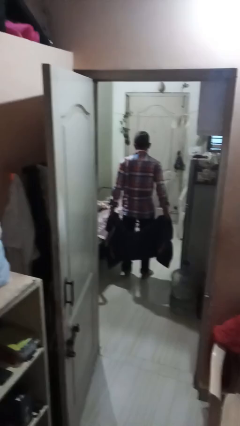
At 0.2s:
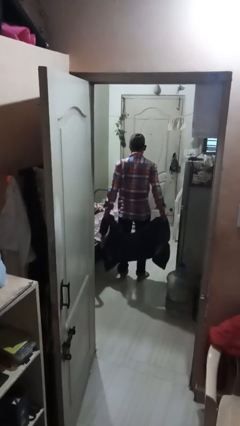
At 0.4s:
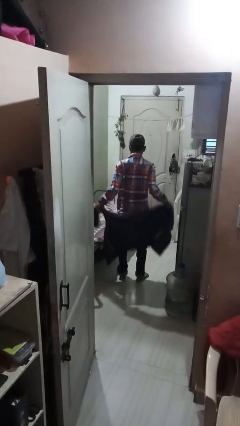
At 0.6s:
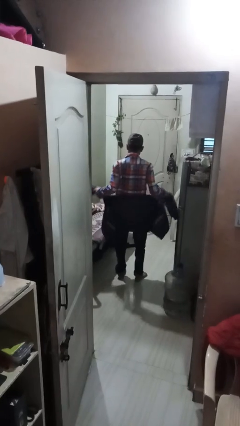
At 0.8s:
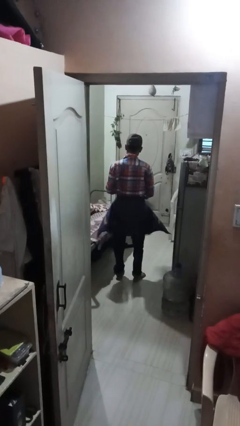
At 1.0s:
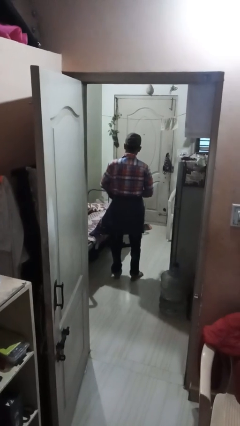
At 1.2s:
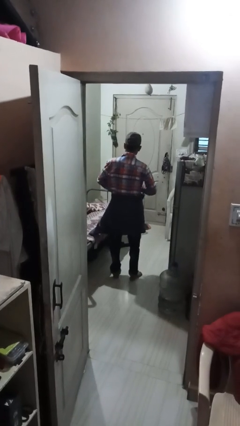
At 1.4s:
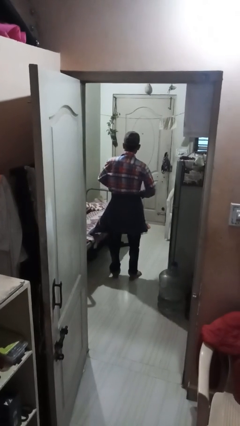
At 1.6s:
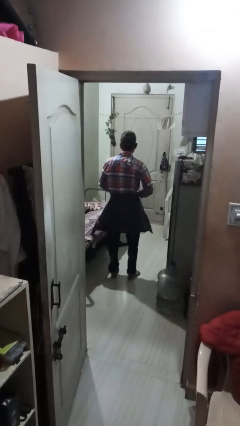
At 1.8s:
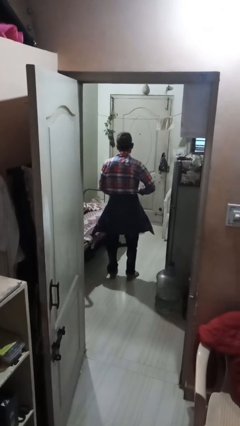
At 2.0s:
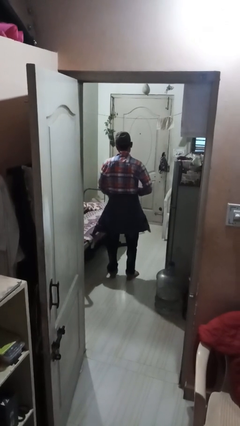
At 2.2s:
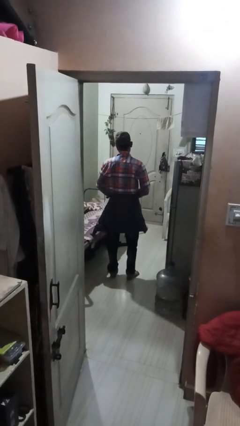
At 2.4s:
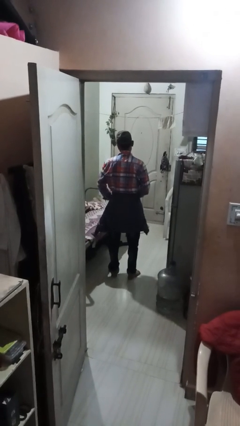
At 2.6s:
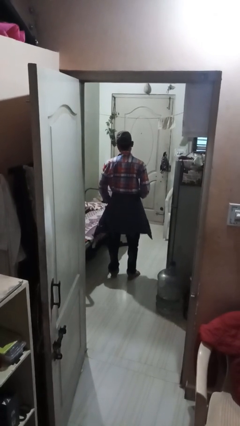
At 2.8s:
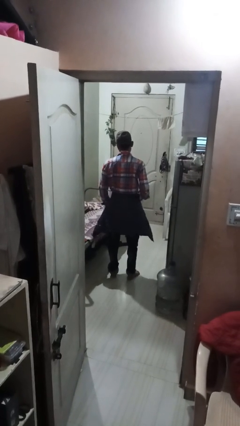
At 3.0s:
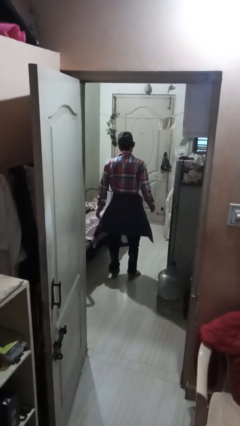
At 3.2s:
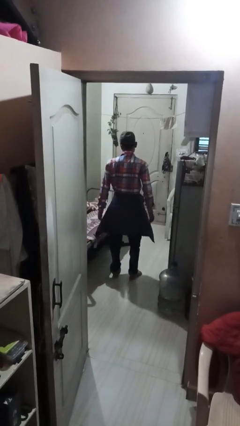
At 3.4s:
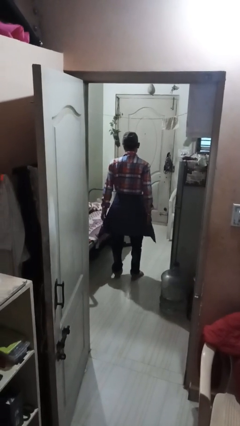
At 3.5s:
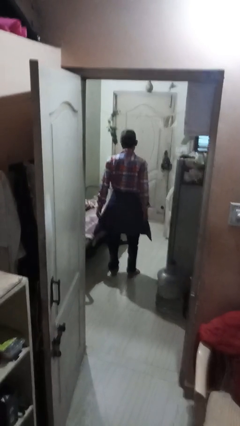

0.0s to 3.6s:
person ties jacket around waist

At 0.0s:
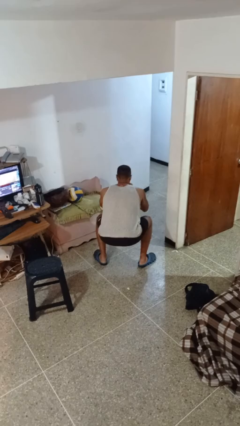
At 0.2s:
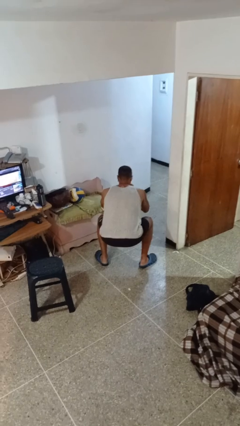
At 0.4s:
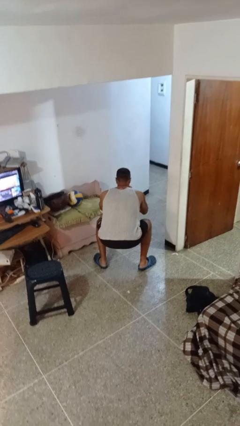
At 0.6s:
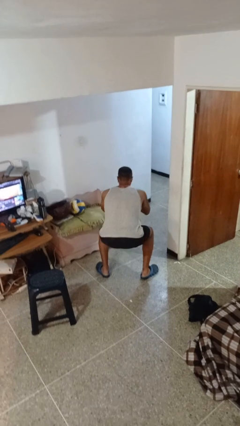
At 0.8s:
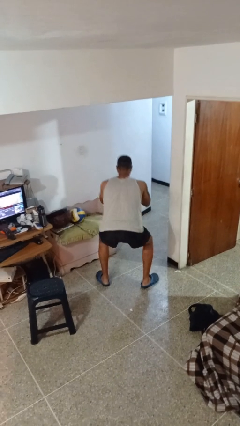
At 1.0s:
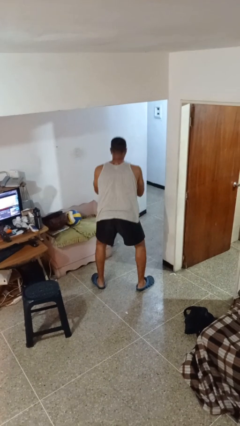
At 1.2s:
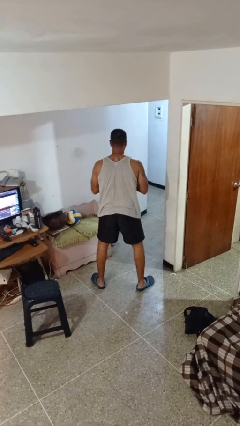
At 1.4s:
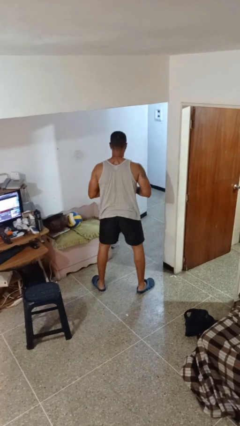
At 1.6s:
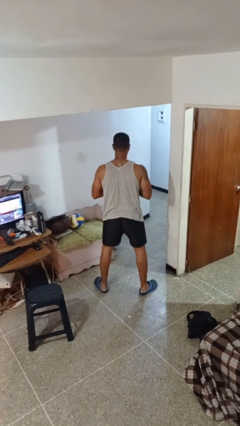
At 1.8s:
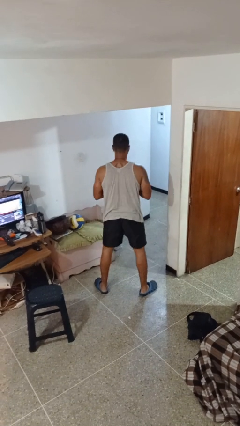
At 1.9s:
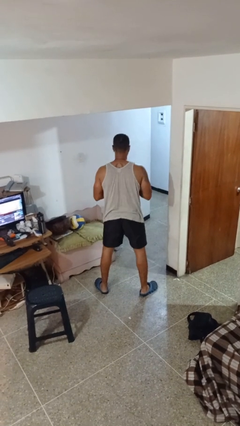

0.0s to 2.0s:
person stands up

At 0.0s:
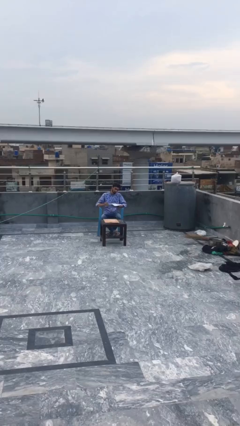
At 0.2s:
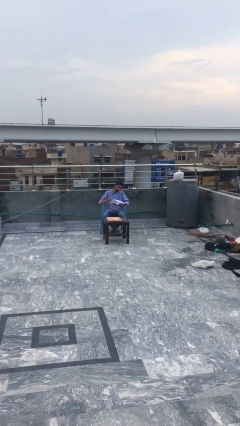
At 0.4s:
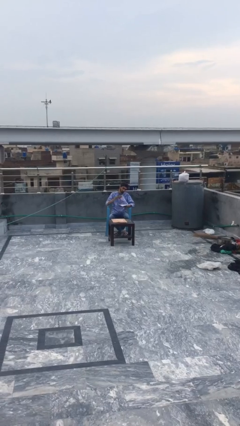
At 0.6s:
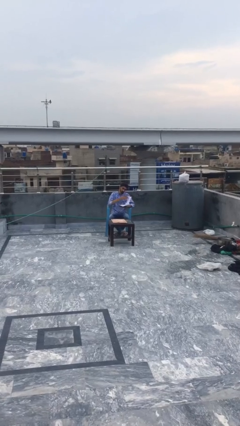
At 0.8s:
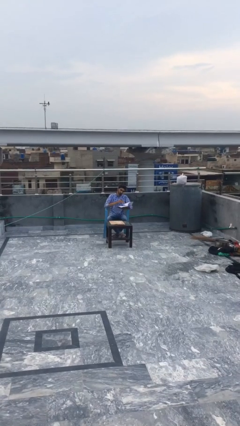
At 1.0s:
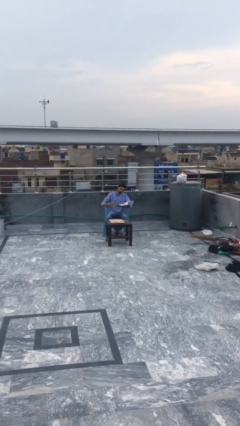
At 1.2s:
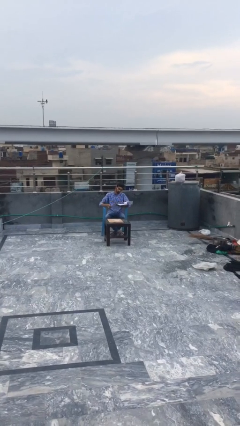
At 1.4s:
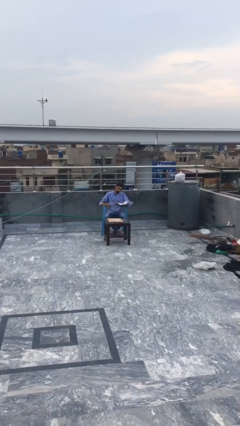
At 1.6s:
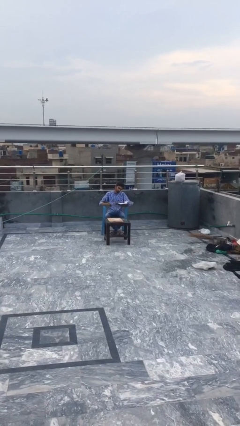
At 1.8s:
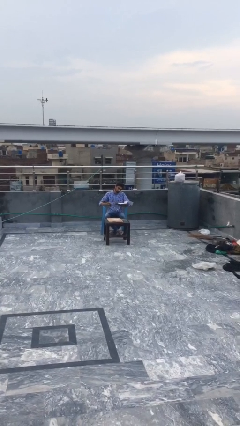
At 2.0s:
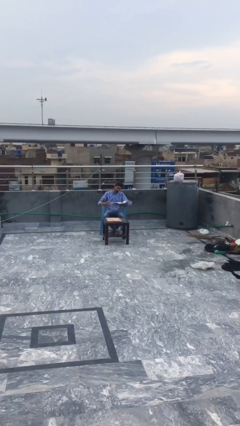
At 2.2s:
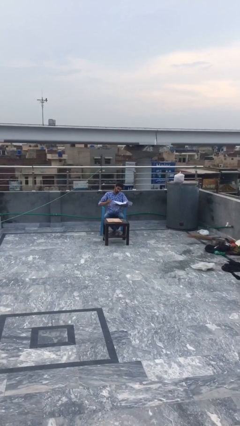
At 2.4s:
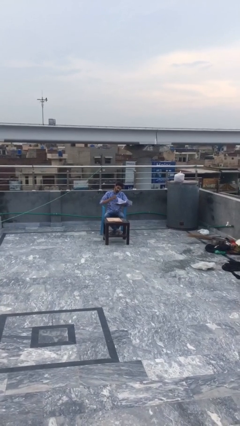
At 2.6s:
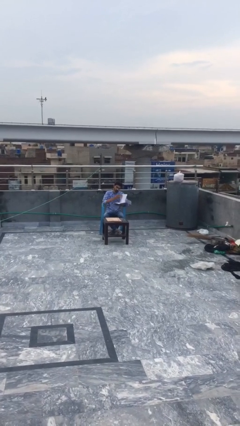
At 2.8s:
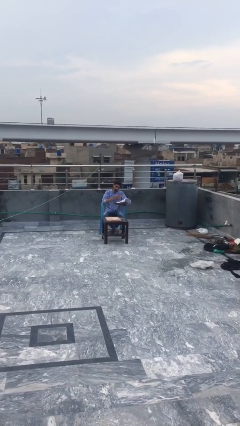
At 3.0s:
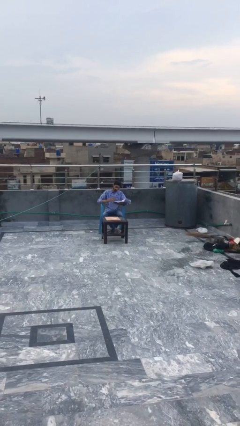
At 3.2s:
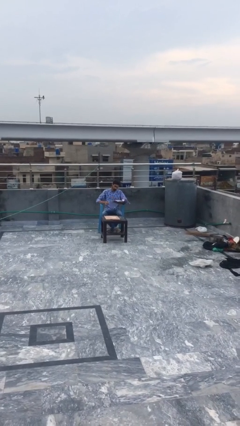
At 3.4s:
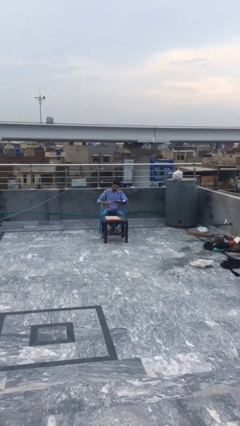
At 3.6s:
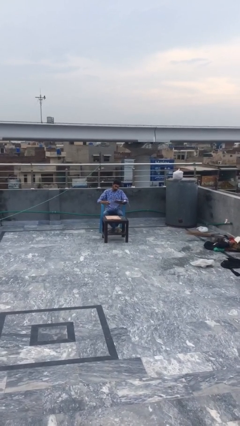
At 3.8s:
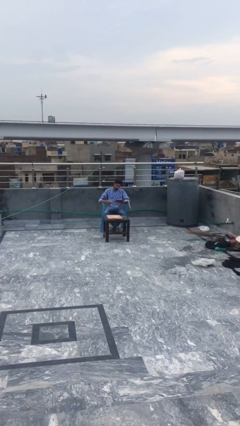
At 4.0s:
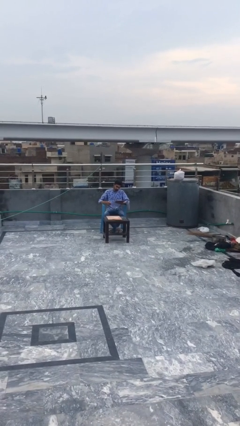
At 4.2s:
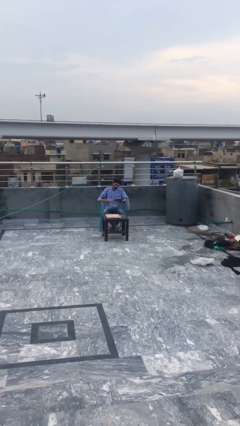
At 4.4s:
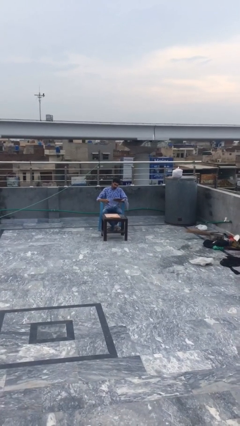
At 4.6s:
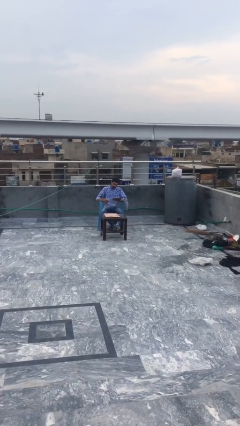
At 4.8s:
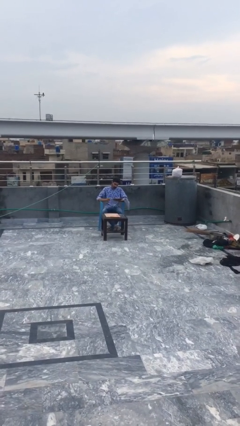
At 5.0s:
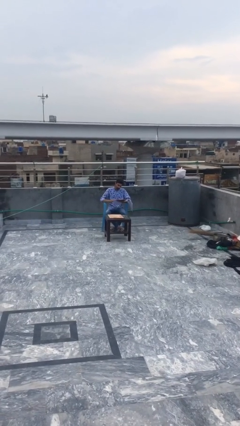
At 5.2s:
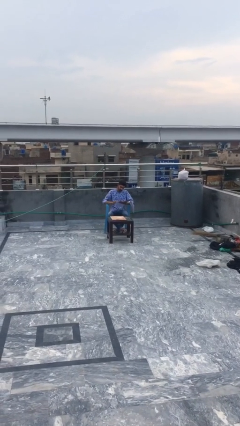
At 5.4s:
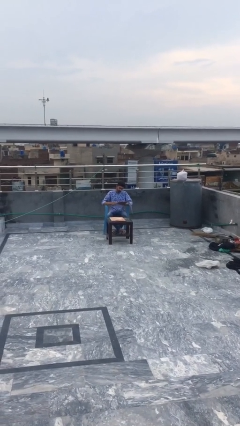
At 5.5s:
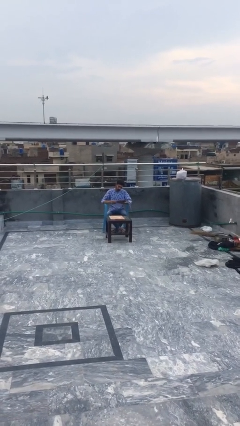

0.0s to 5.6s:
person reads document

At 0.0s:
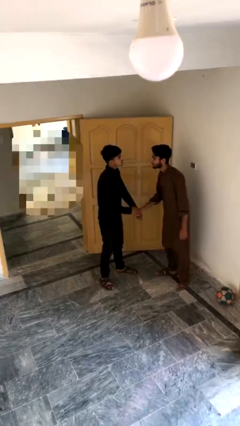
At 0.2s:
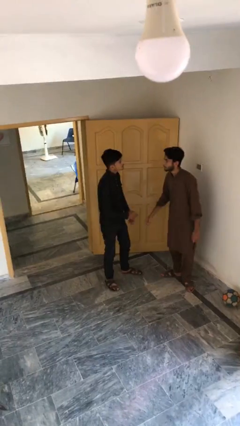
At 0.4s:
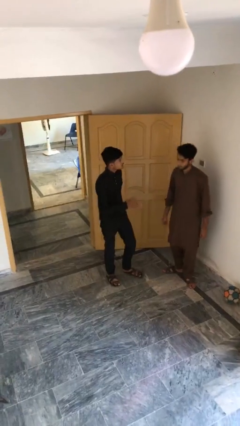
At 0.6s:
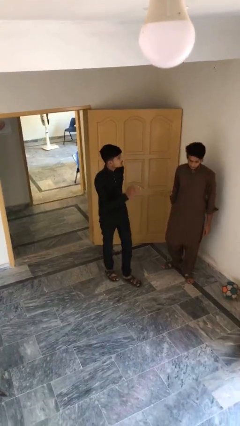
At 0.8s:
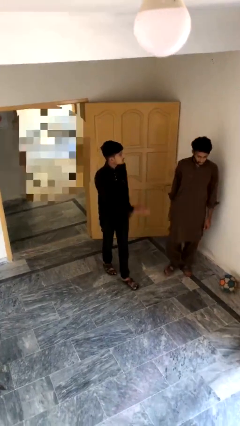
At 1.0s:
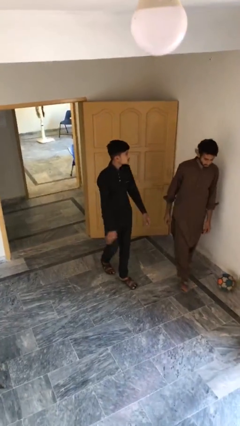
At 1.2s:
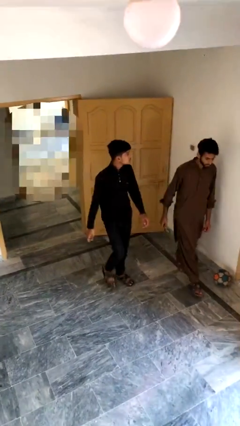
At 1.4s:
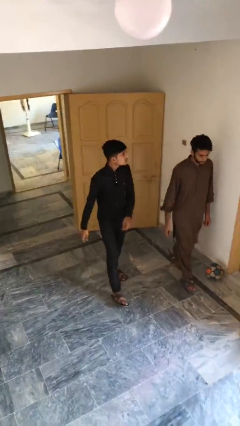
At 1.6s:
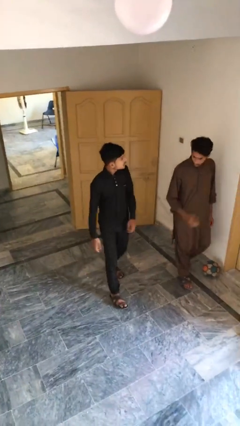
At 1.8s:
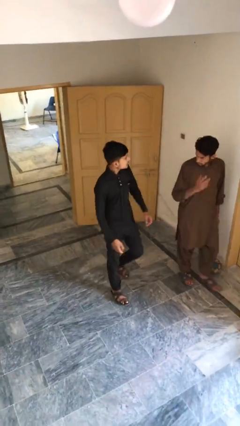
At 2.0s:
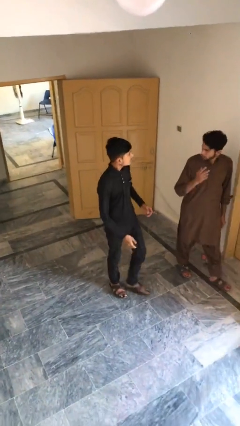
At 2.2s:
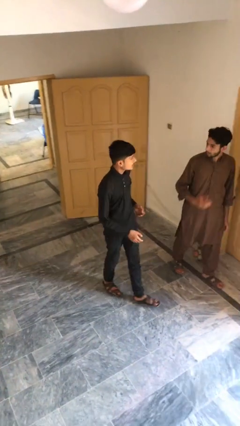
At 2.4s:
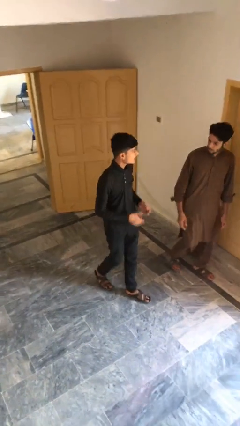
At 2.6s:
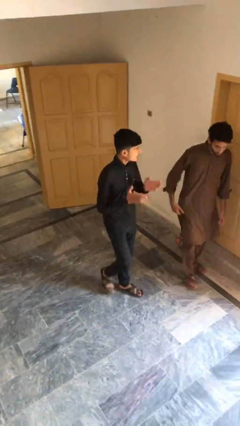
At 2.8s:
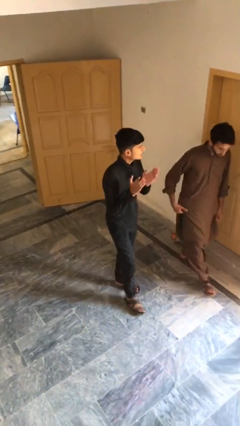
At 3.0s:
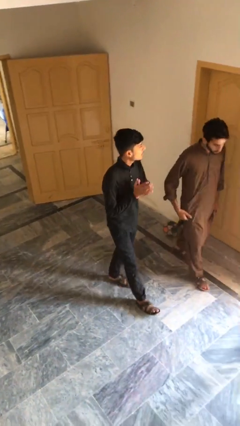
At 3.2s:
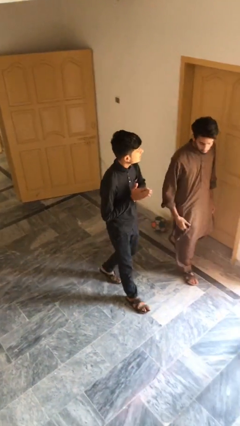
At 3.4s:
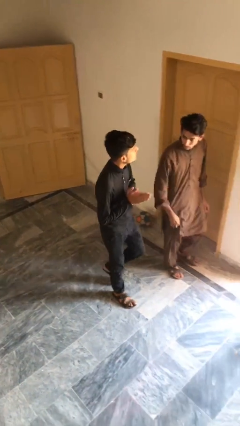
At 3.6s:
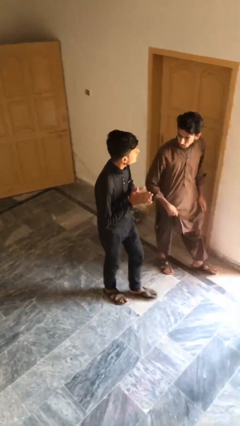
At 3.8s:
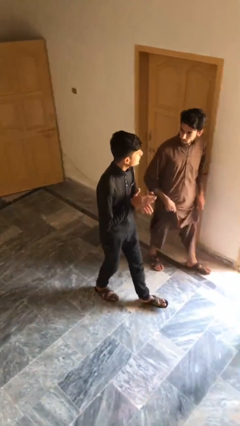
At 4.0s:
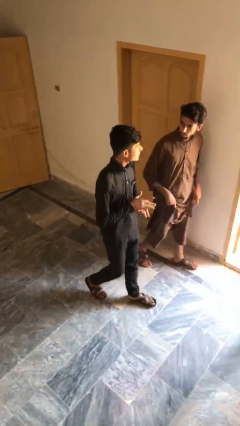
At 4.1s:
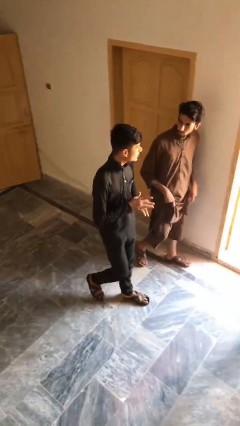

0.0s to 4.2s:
person talks to person

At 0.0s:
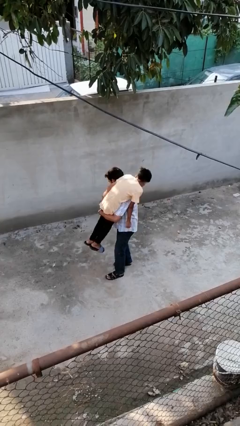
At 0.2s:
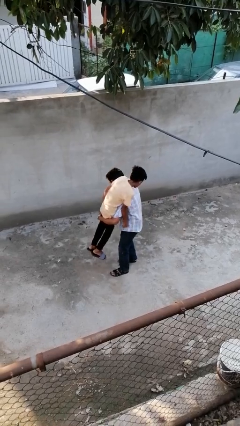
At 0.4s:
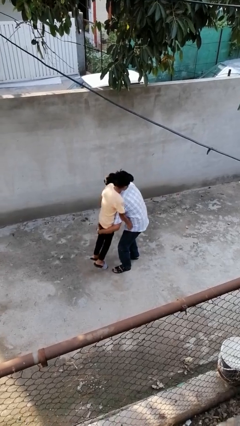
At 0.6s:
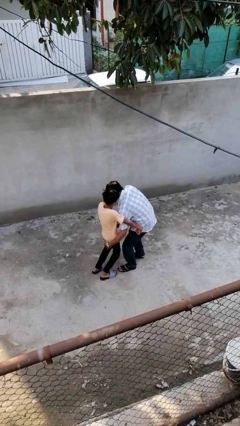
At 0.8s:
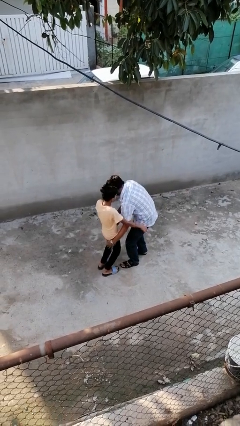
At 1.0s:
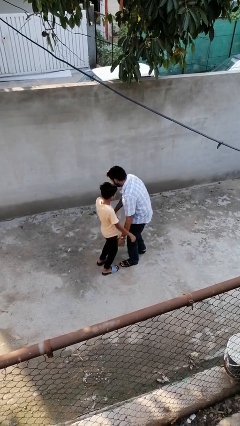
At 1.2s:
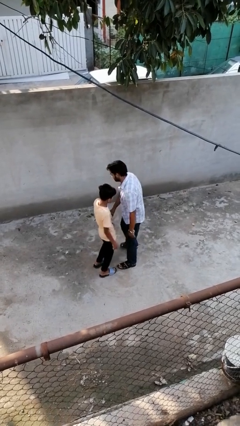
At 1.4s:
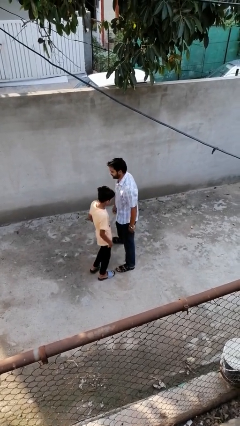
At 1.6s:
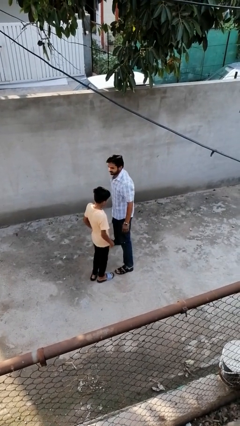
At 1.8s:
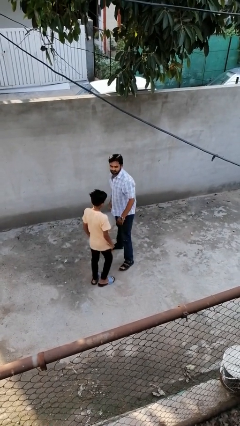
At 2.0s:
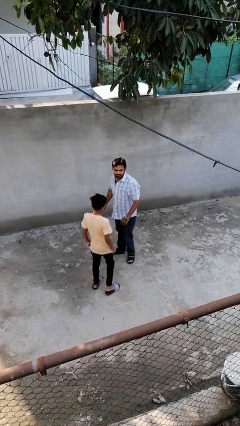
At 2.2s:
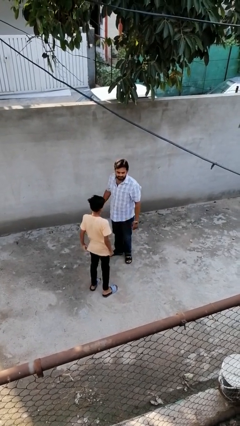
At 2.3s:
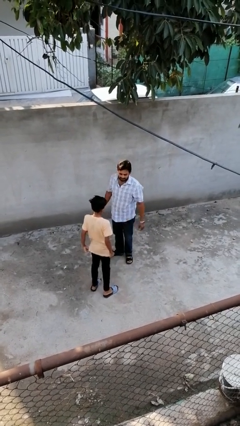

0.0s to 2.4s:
person puts down person

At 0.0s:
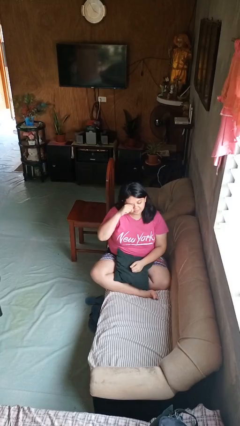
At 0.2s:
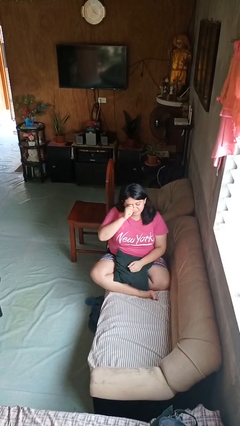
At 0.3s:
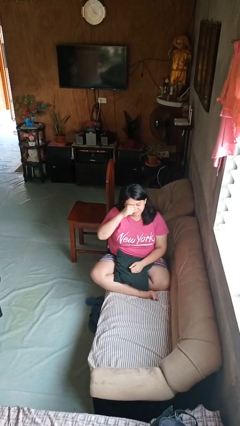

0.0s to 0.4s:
person rubs eyes
